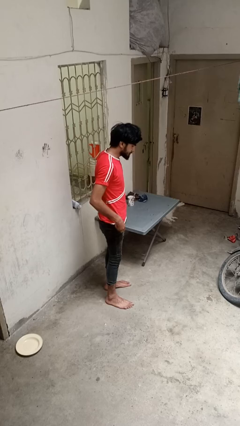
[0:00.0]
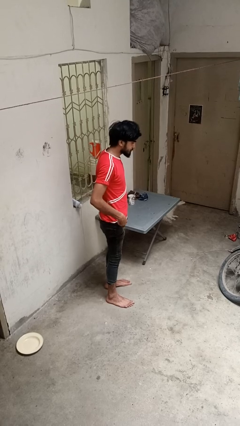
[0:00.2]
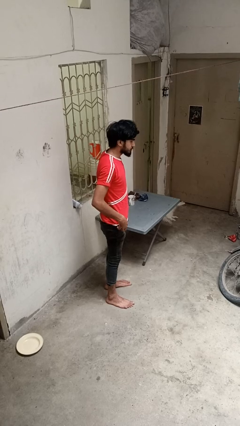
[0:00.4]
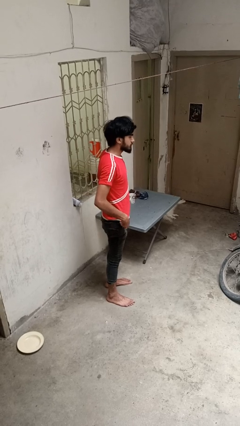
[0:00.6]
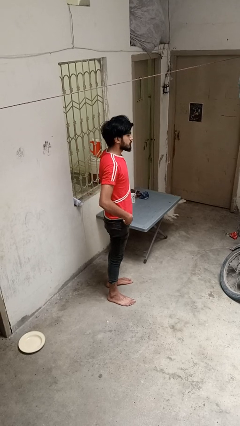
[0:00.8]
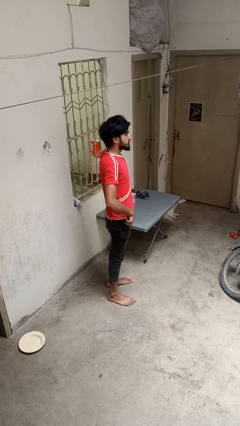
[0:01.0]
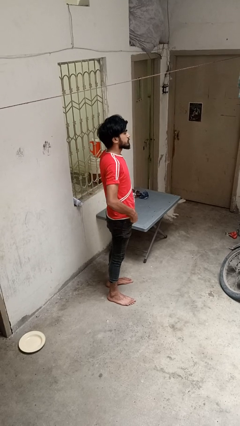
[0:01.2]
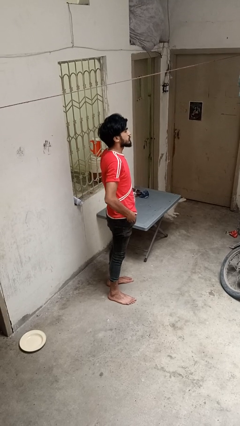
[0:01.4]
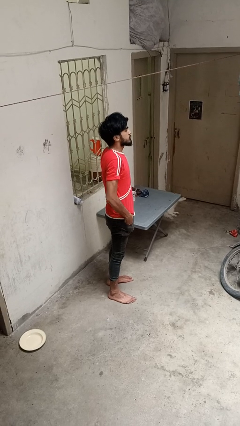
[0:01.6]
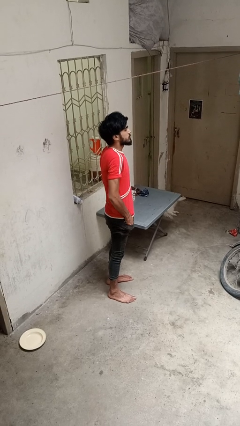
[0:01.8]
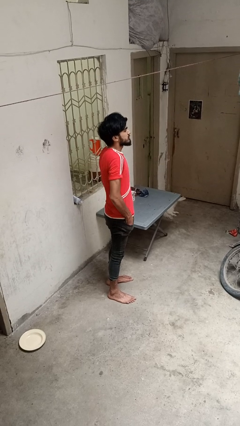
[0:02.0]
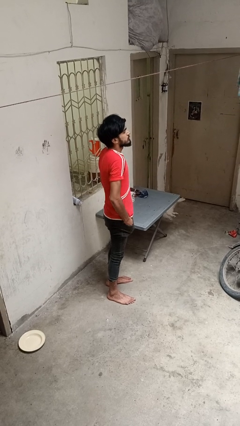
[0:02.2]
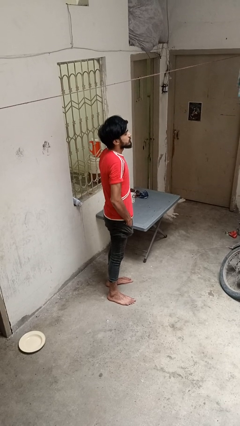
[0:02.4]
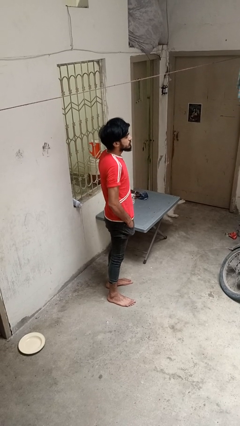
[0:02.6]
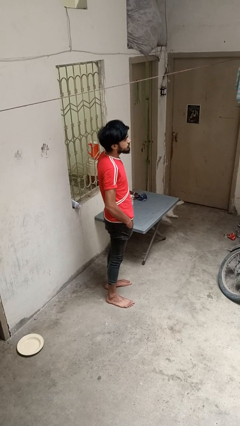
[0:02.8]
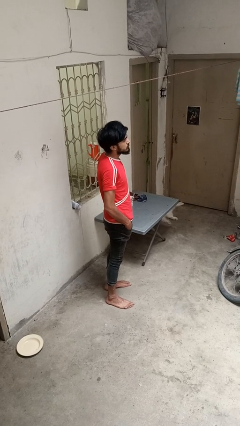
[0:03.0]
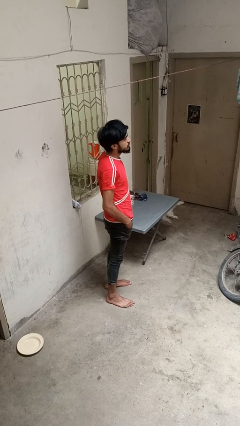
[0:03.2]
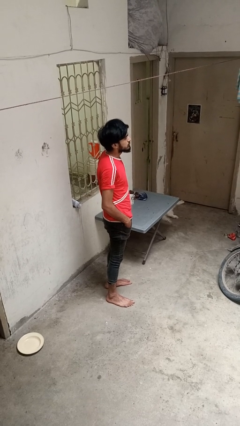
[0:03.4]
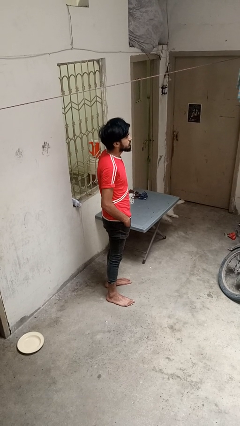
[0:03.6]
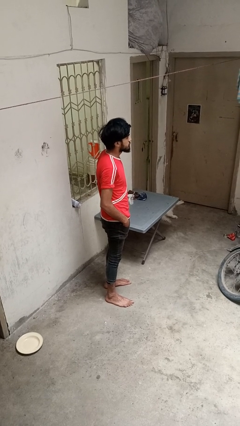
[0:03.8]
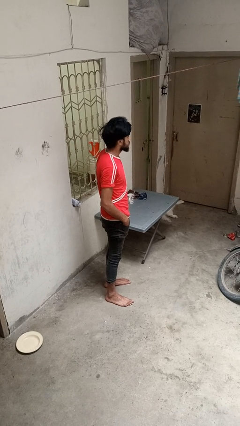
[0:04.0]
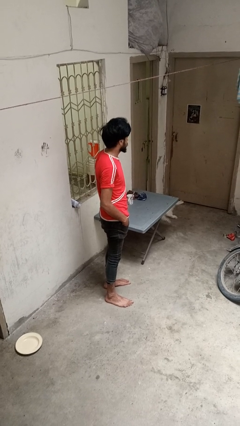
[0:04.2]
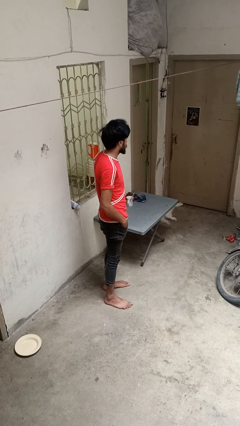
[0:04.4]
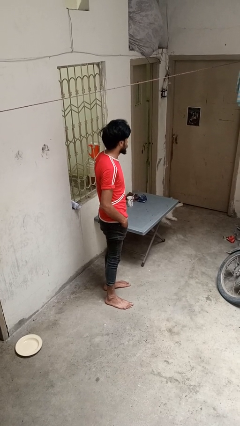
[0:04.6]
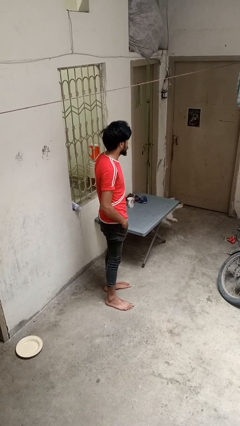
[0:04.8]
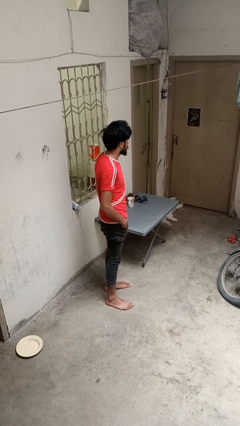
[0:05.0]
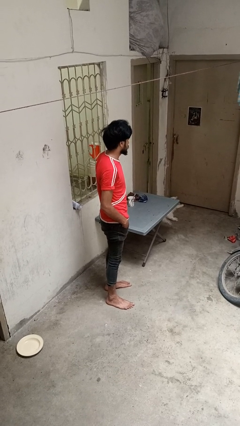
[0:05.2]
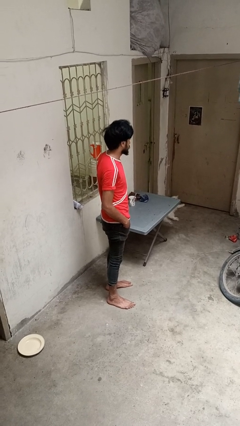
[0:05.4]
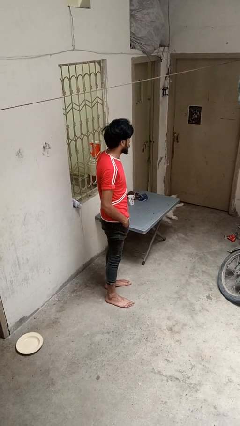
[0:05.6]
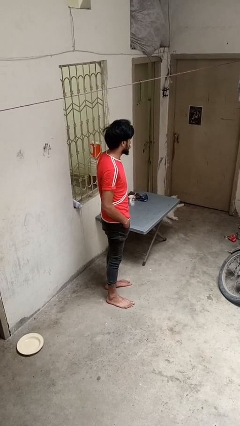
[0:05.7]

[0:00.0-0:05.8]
person puts hands in back pockets

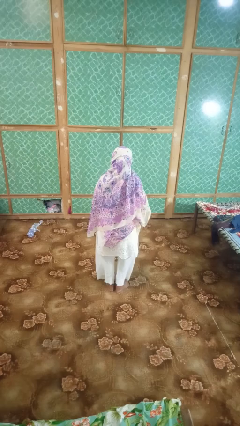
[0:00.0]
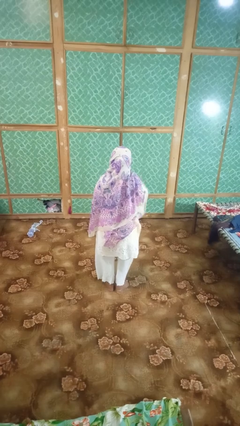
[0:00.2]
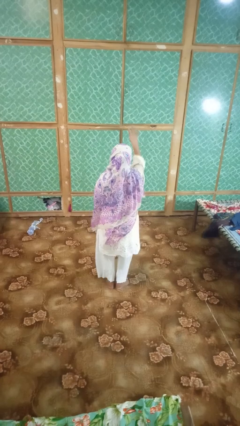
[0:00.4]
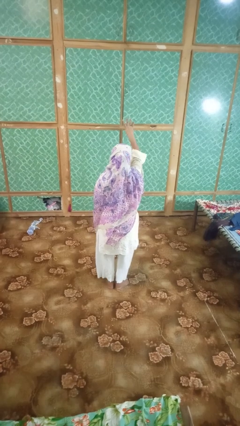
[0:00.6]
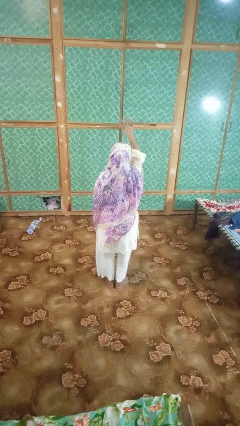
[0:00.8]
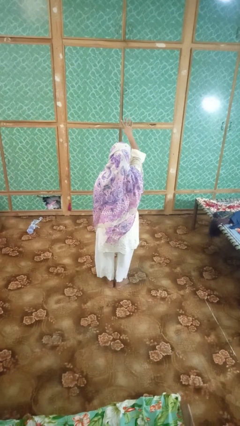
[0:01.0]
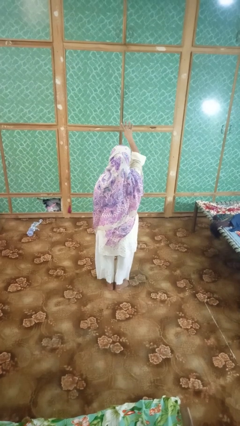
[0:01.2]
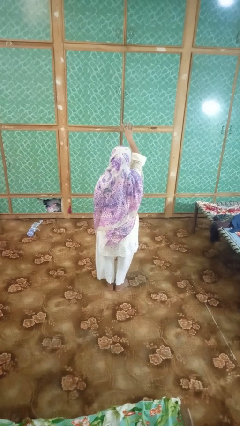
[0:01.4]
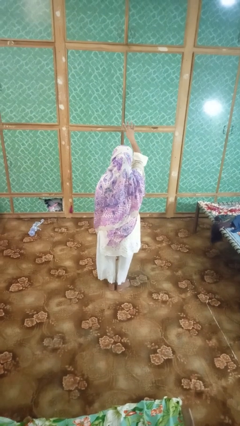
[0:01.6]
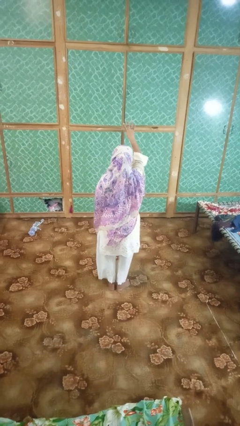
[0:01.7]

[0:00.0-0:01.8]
person gestures number four

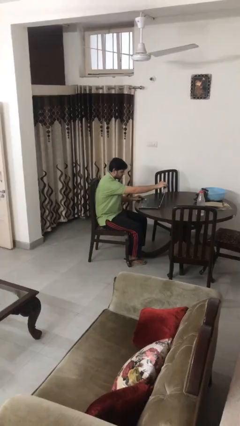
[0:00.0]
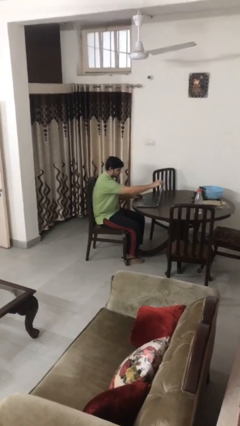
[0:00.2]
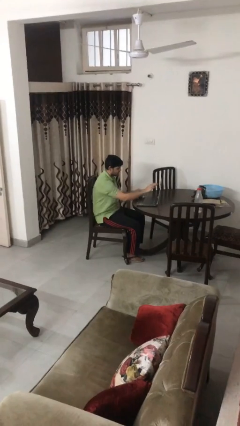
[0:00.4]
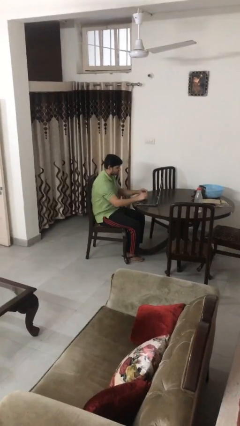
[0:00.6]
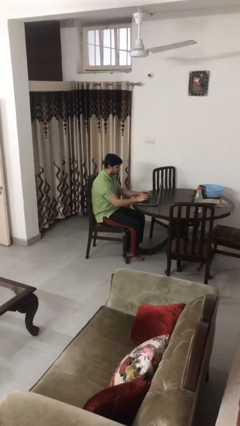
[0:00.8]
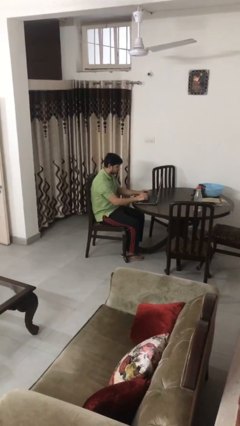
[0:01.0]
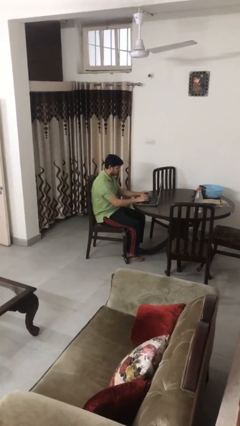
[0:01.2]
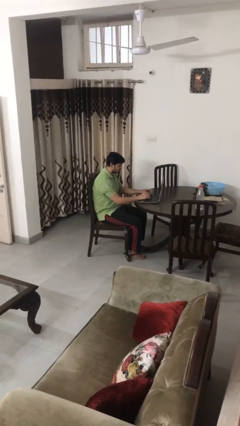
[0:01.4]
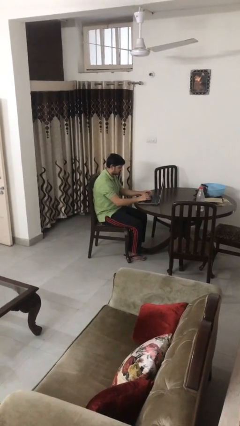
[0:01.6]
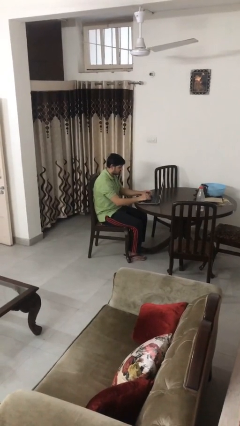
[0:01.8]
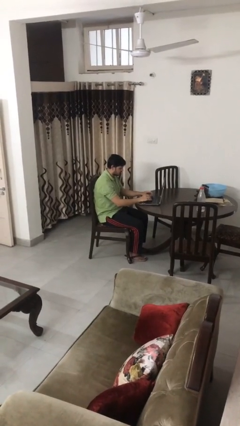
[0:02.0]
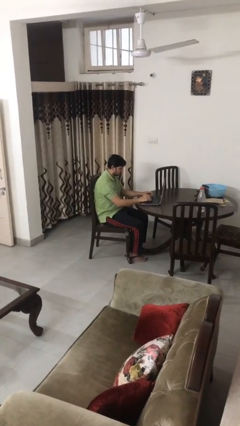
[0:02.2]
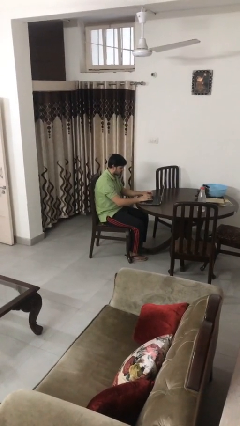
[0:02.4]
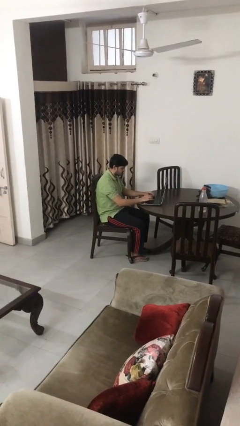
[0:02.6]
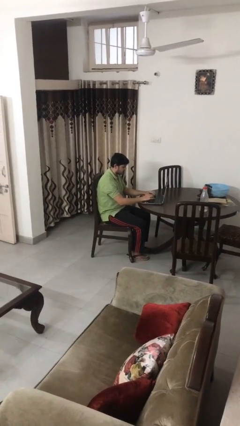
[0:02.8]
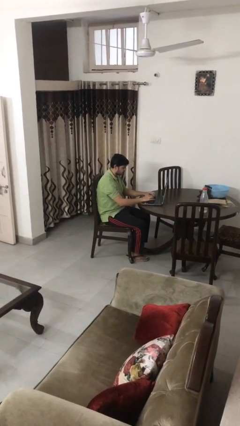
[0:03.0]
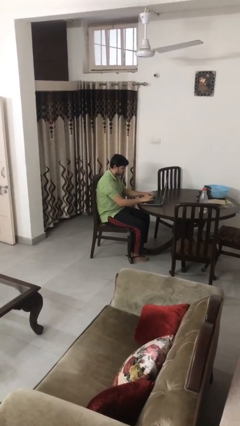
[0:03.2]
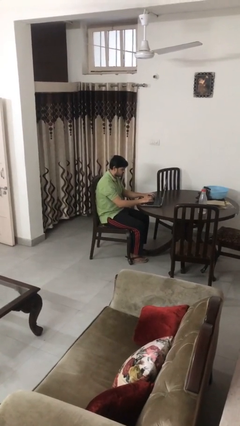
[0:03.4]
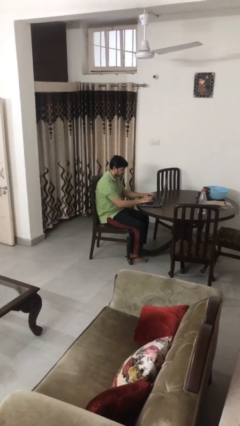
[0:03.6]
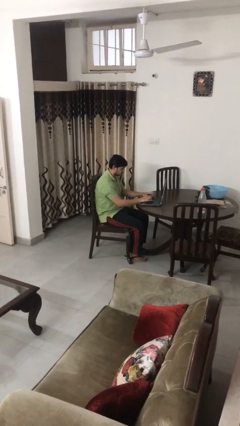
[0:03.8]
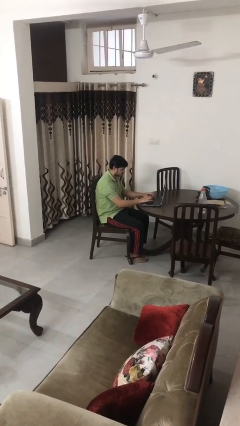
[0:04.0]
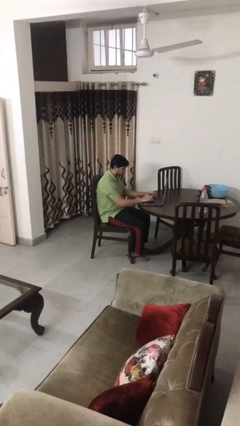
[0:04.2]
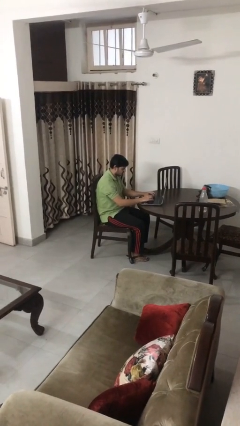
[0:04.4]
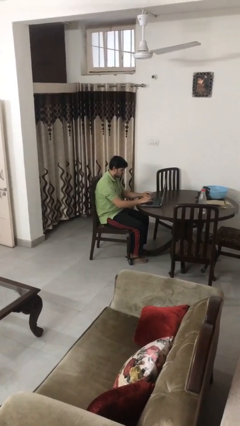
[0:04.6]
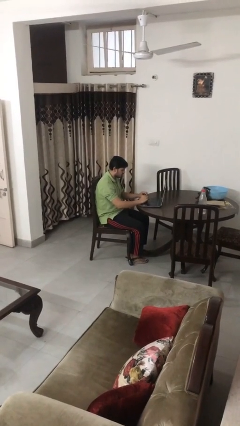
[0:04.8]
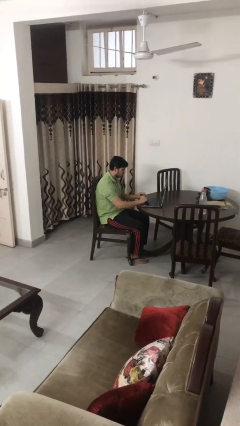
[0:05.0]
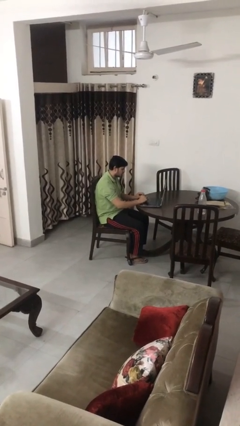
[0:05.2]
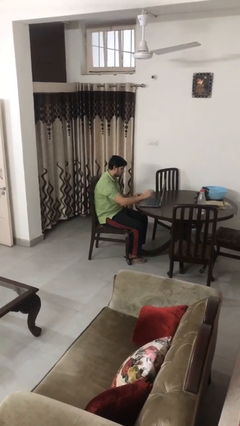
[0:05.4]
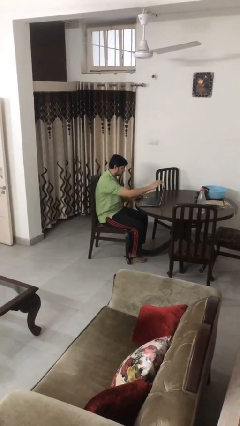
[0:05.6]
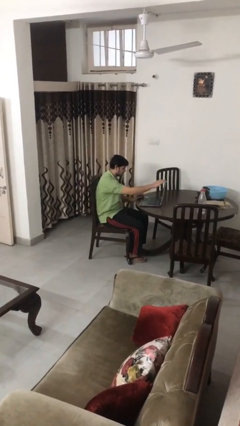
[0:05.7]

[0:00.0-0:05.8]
person interacts with laptop

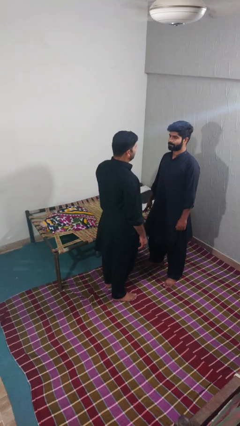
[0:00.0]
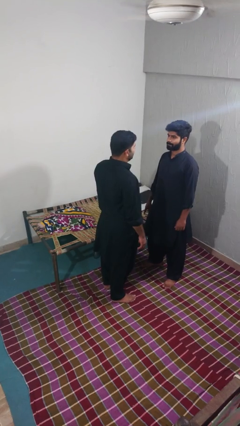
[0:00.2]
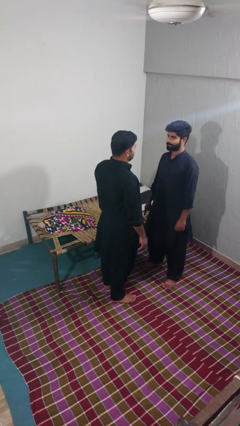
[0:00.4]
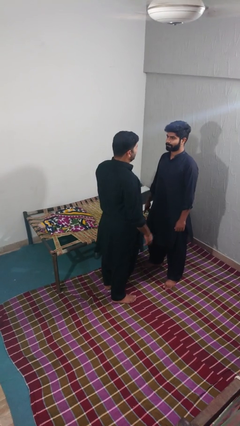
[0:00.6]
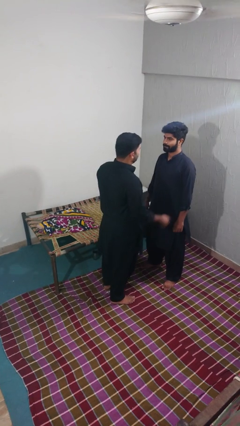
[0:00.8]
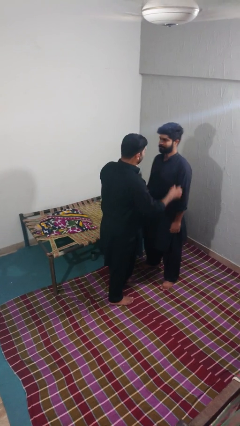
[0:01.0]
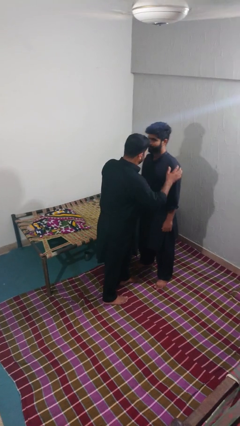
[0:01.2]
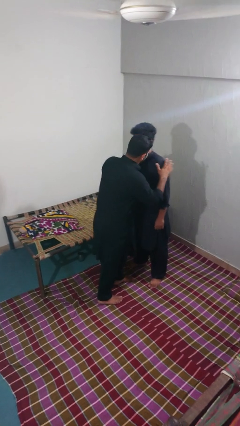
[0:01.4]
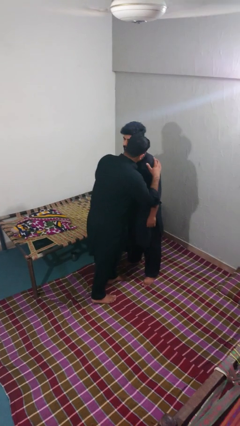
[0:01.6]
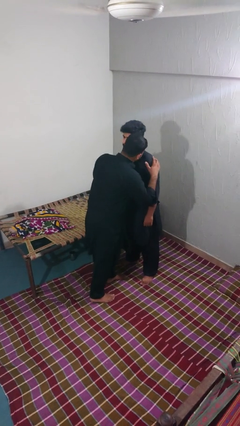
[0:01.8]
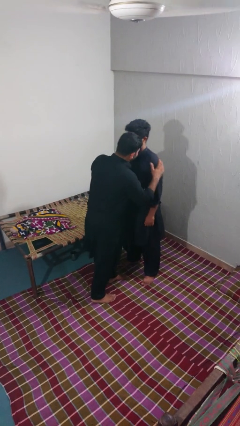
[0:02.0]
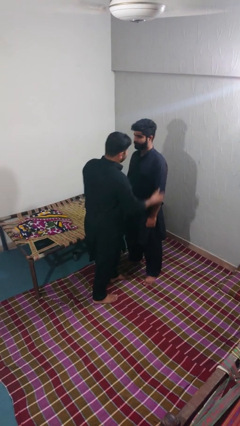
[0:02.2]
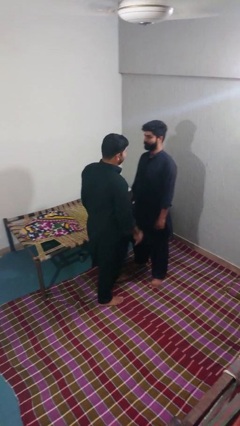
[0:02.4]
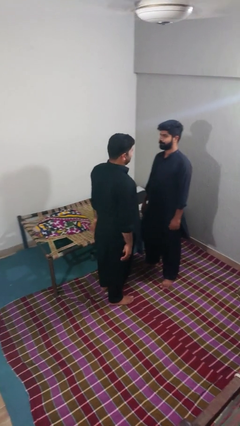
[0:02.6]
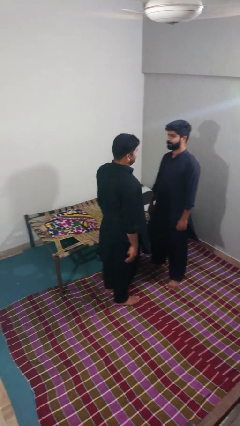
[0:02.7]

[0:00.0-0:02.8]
person kisses cheek of person

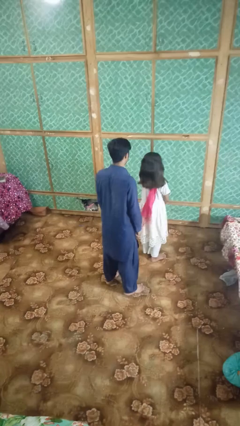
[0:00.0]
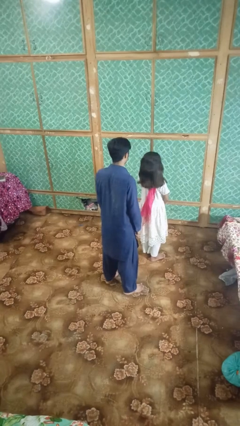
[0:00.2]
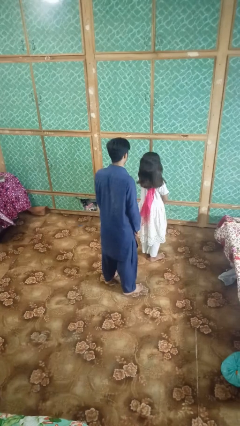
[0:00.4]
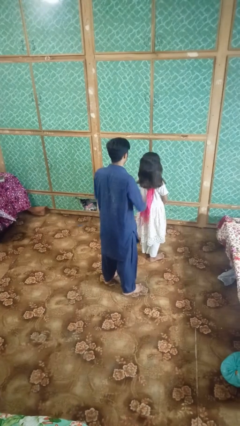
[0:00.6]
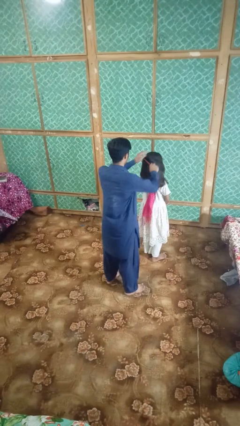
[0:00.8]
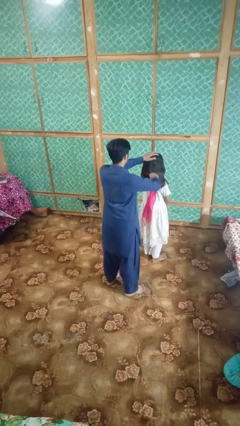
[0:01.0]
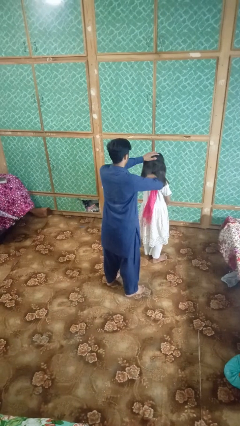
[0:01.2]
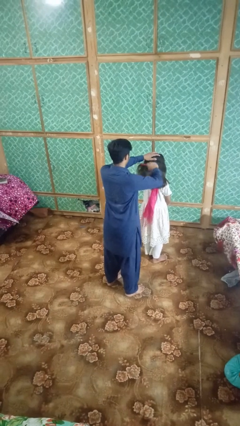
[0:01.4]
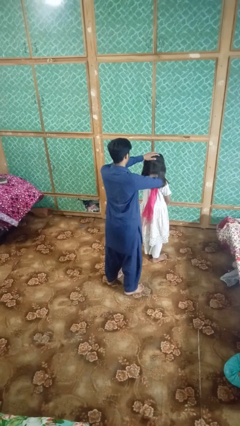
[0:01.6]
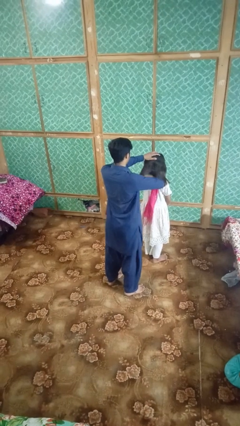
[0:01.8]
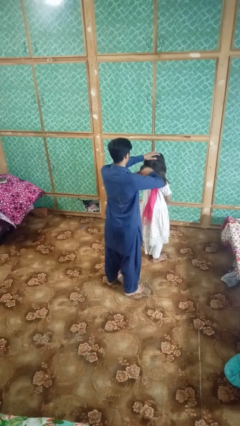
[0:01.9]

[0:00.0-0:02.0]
person brushes hair of person
